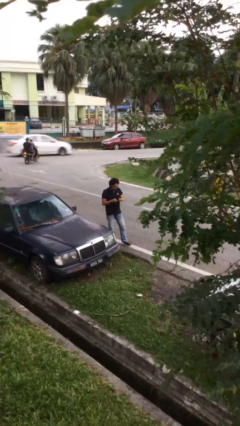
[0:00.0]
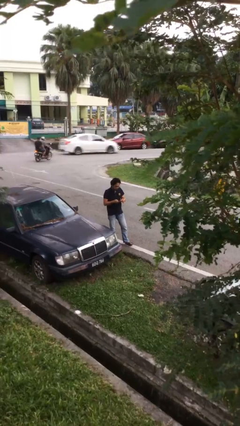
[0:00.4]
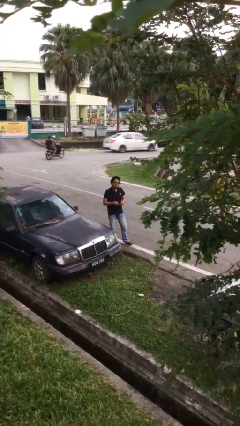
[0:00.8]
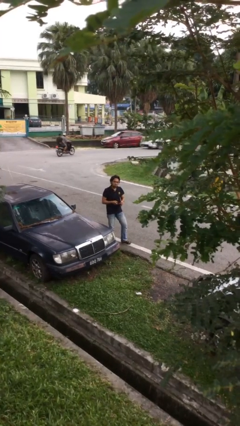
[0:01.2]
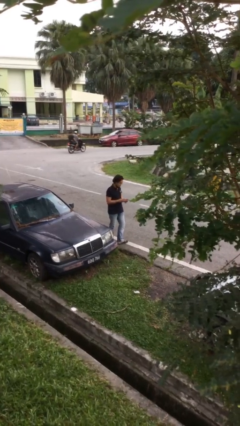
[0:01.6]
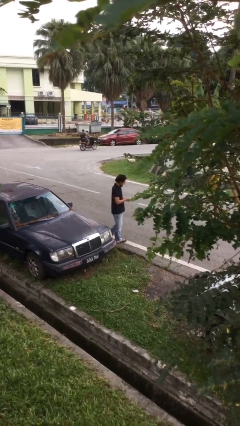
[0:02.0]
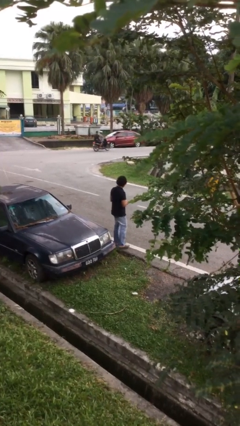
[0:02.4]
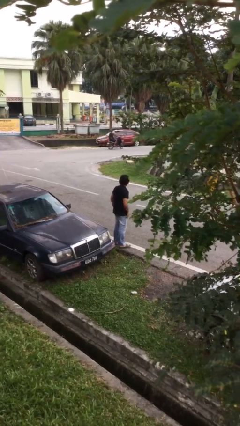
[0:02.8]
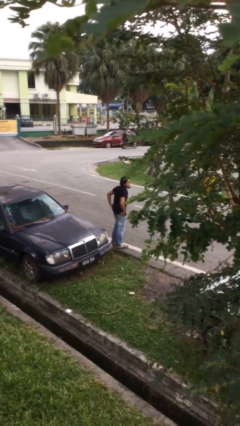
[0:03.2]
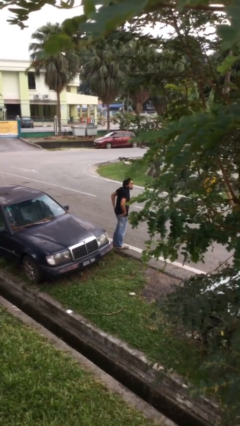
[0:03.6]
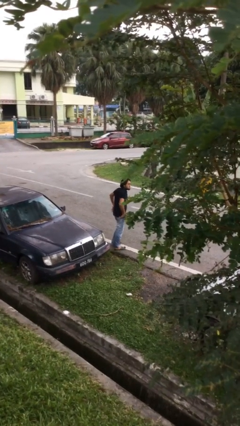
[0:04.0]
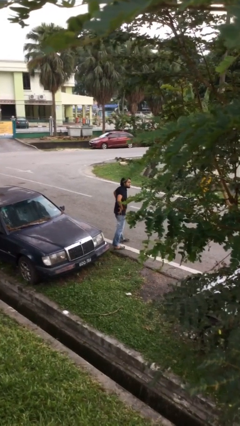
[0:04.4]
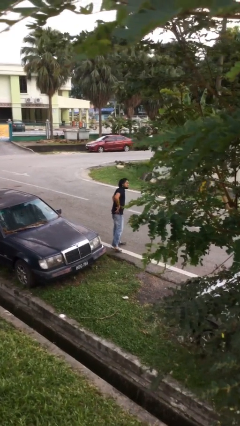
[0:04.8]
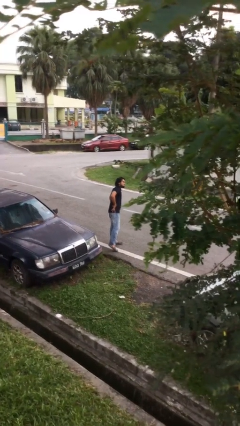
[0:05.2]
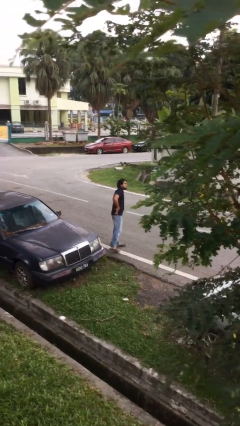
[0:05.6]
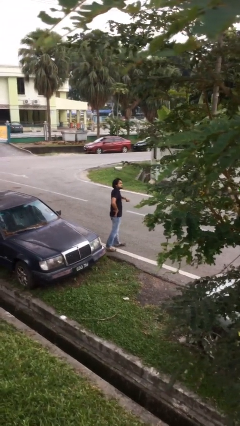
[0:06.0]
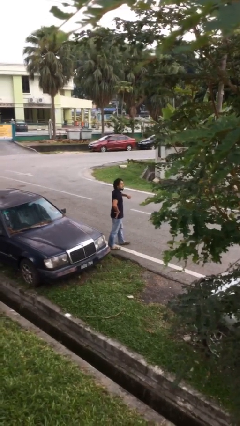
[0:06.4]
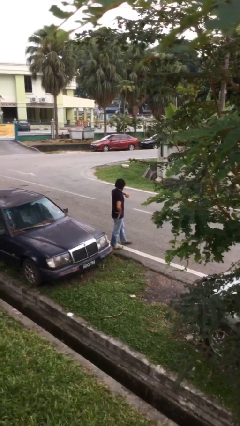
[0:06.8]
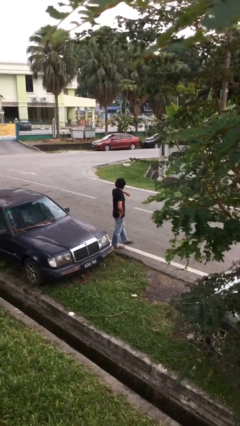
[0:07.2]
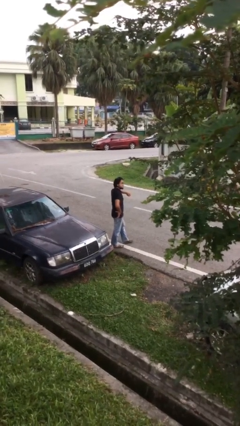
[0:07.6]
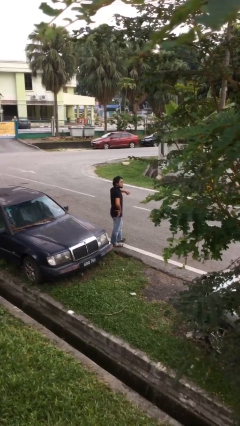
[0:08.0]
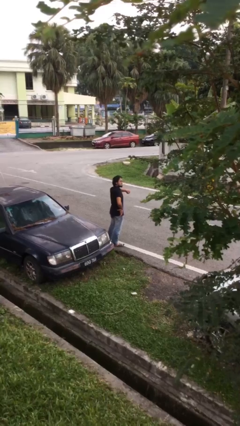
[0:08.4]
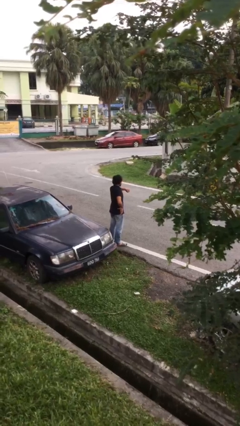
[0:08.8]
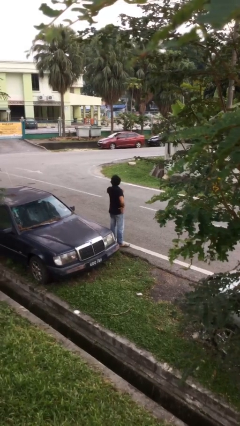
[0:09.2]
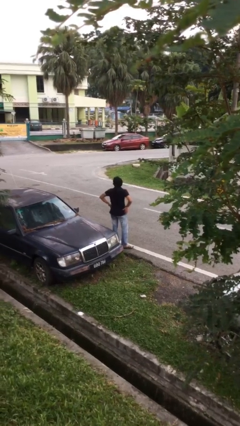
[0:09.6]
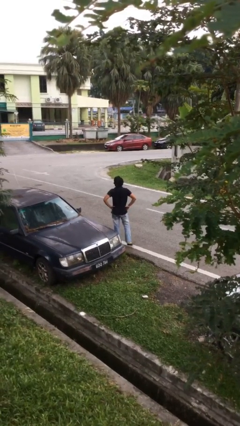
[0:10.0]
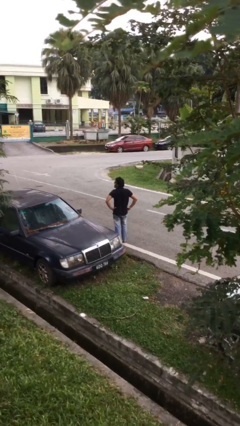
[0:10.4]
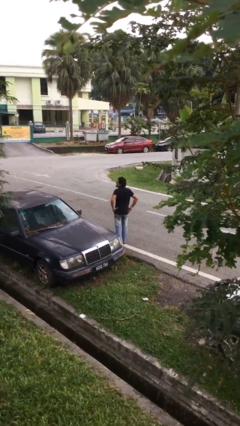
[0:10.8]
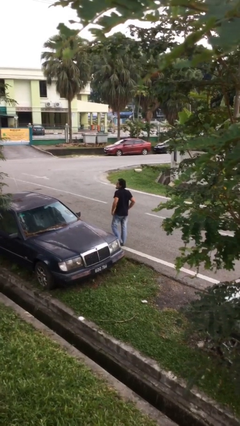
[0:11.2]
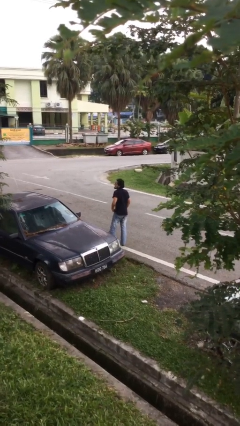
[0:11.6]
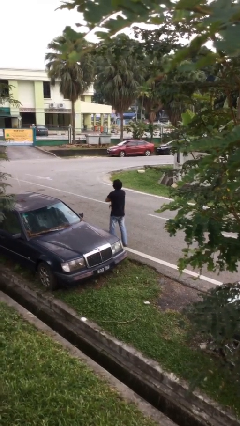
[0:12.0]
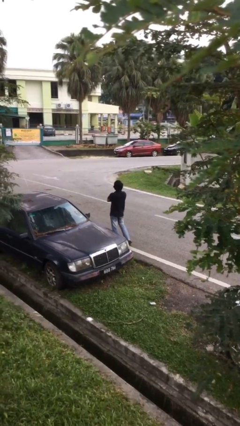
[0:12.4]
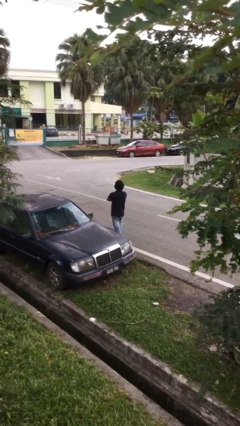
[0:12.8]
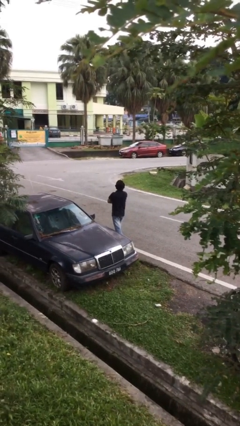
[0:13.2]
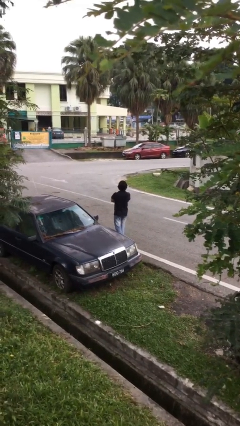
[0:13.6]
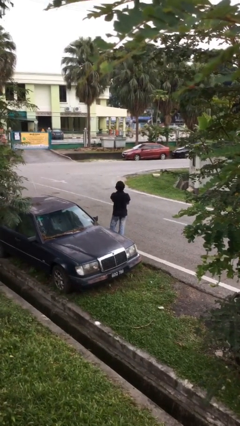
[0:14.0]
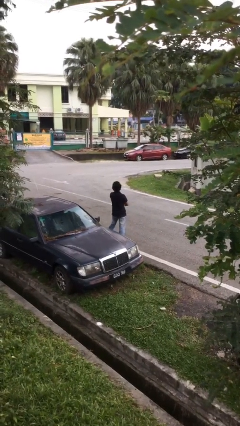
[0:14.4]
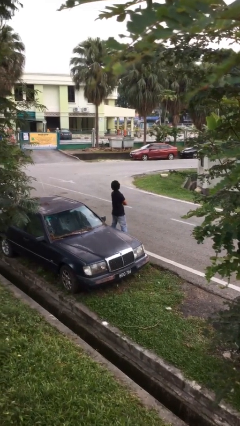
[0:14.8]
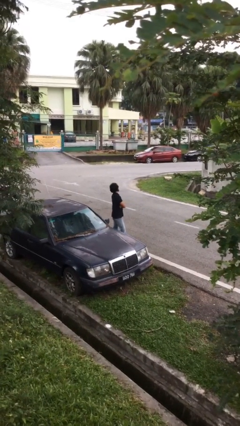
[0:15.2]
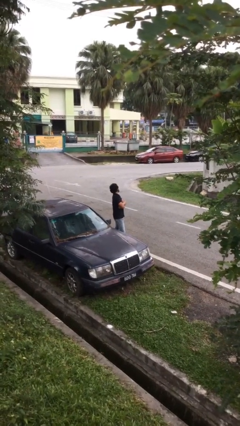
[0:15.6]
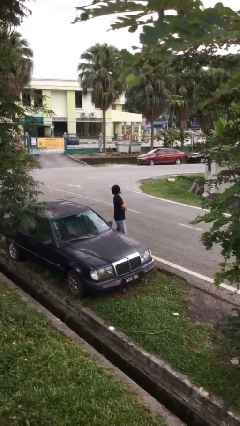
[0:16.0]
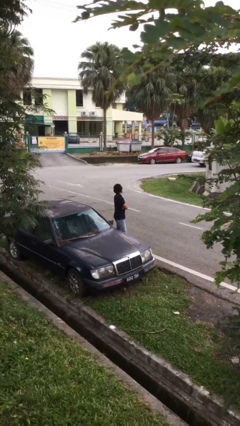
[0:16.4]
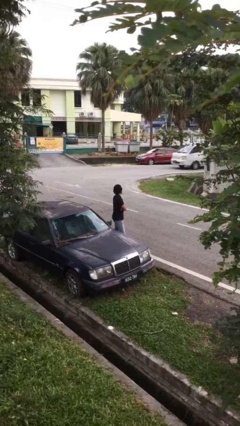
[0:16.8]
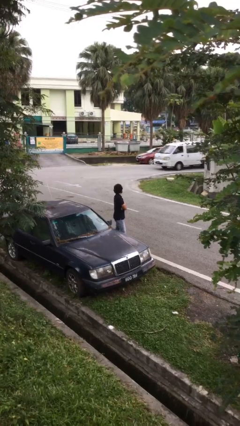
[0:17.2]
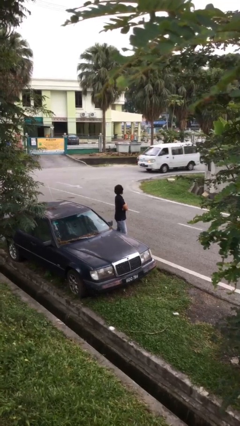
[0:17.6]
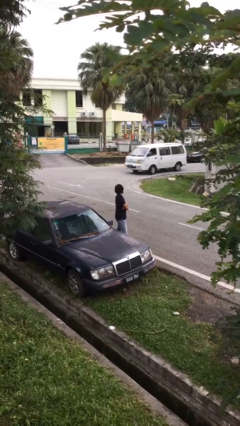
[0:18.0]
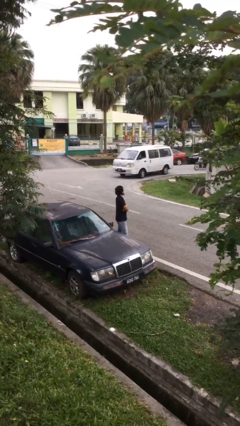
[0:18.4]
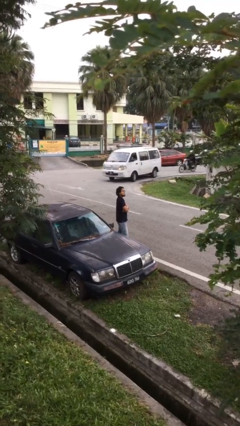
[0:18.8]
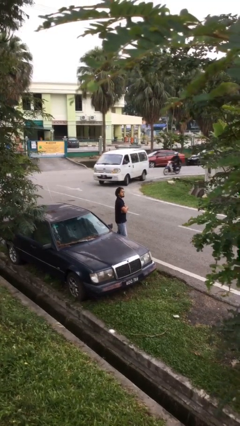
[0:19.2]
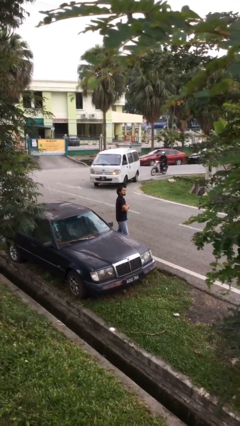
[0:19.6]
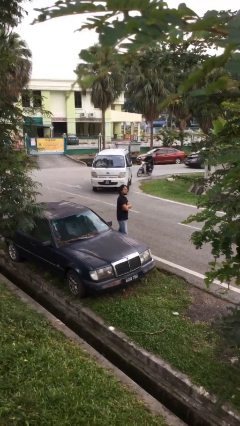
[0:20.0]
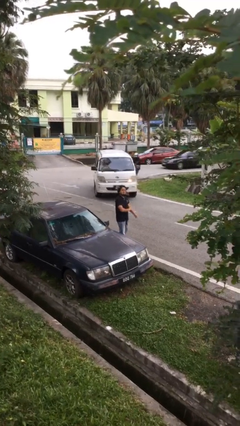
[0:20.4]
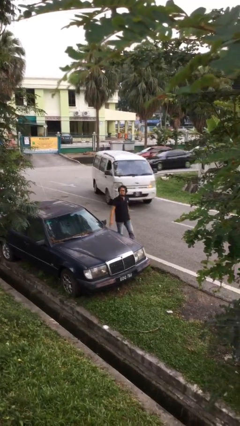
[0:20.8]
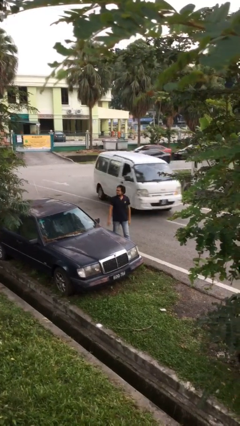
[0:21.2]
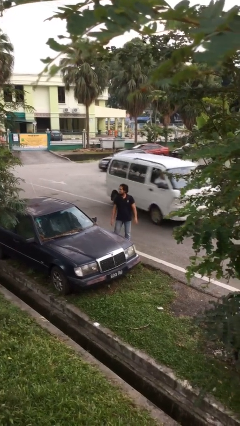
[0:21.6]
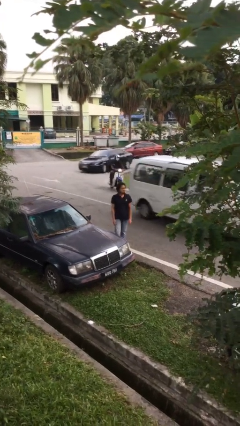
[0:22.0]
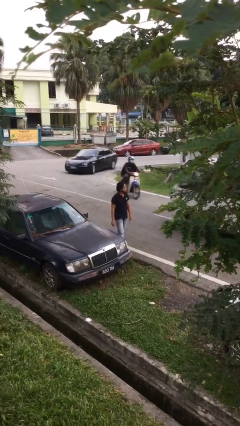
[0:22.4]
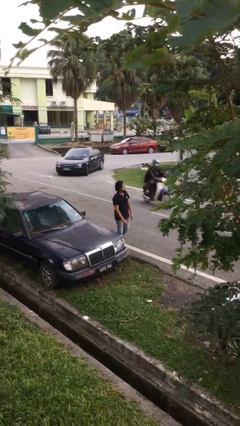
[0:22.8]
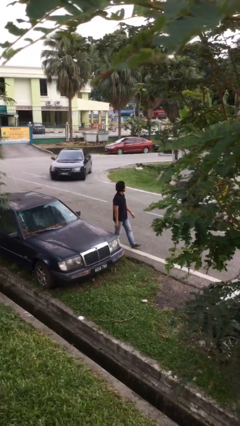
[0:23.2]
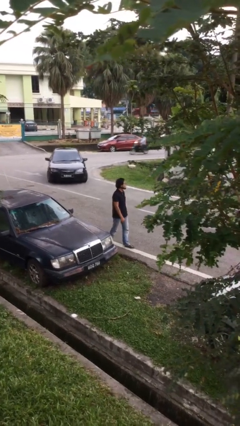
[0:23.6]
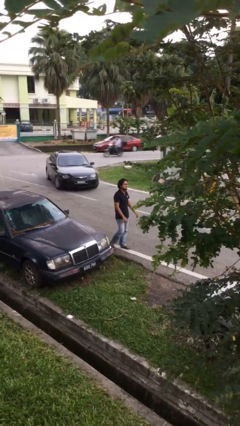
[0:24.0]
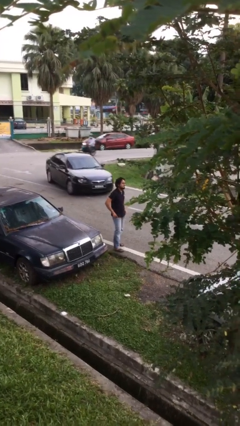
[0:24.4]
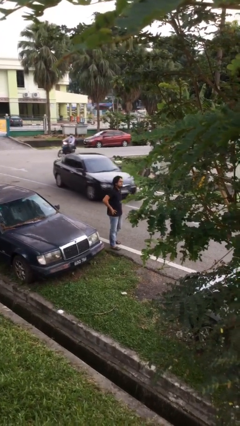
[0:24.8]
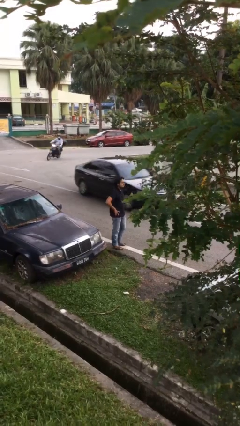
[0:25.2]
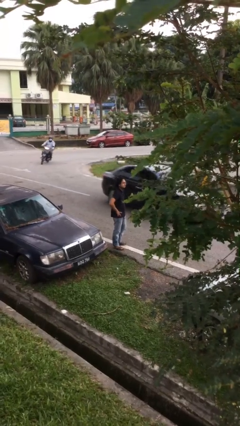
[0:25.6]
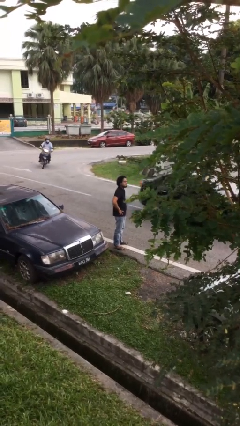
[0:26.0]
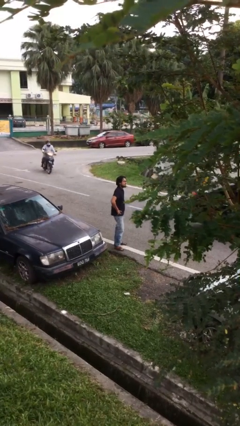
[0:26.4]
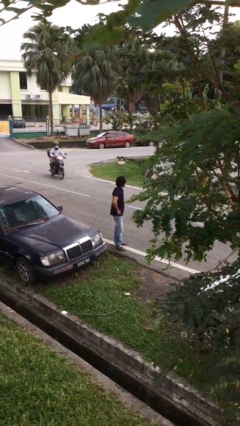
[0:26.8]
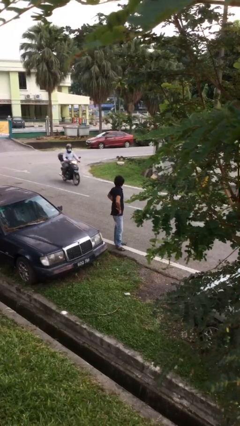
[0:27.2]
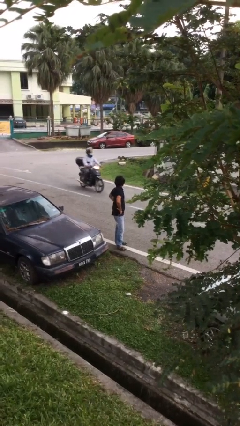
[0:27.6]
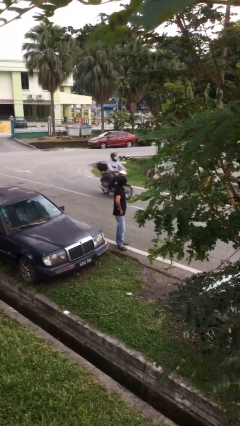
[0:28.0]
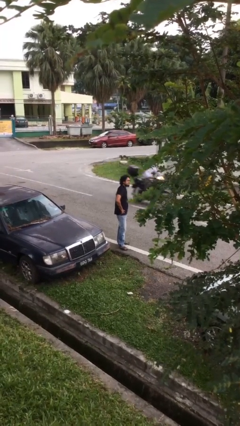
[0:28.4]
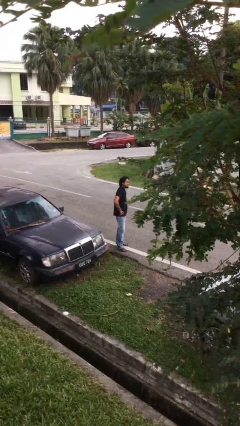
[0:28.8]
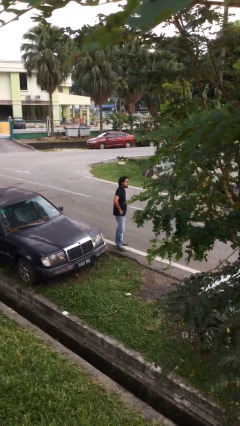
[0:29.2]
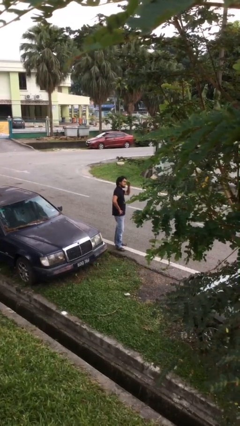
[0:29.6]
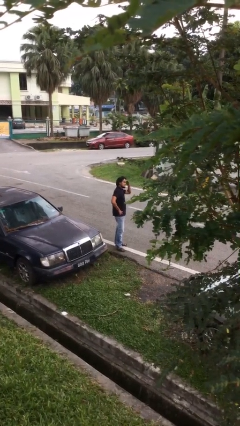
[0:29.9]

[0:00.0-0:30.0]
person walks

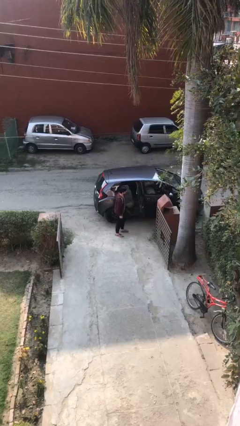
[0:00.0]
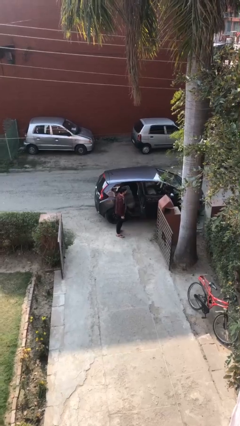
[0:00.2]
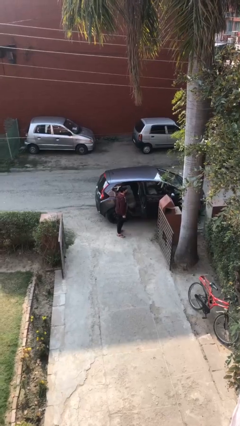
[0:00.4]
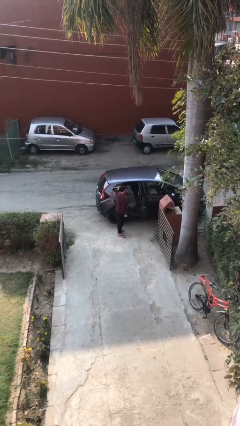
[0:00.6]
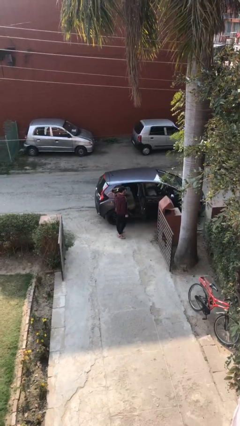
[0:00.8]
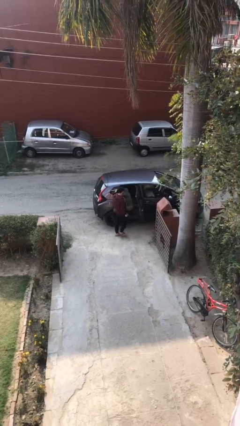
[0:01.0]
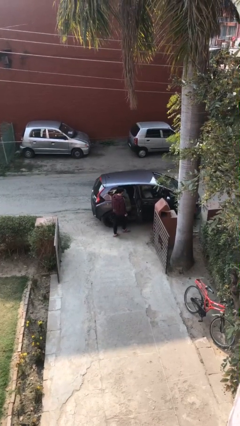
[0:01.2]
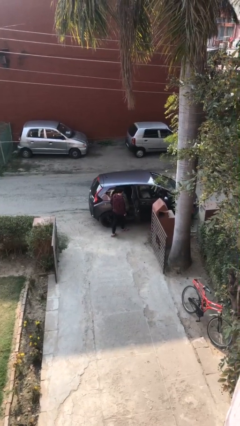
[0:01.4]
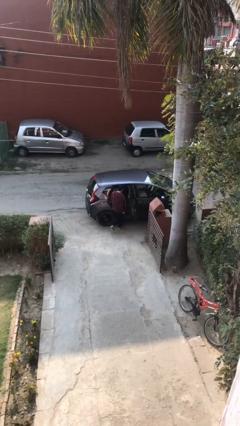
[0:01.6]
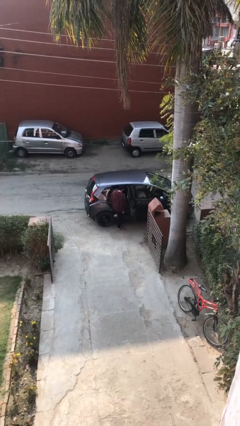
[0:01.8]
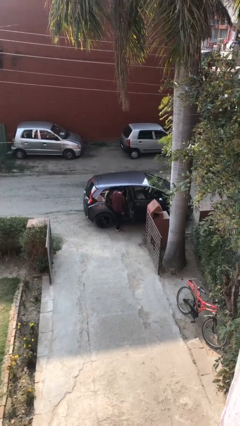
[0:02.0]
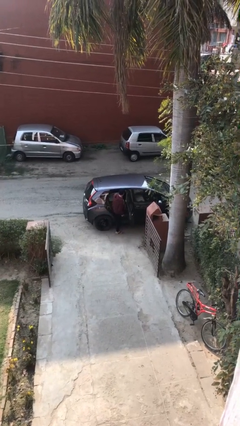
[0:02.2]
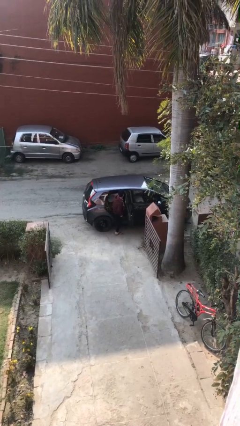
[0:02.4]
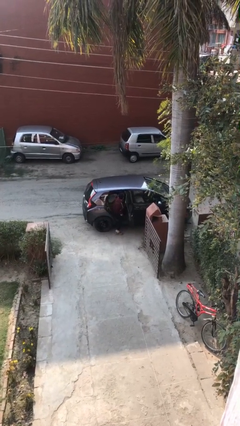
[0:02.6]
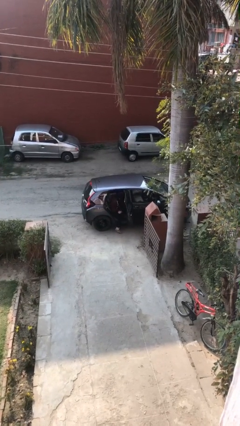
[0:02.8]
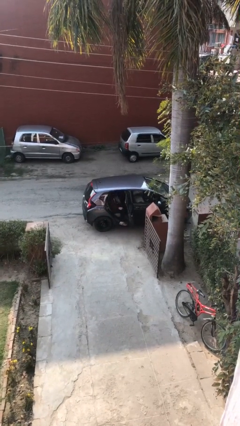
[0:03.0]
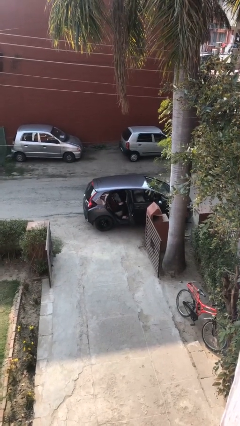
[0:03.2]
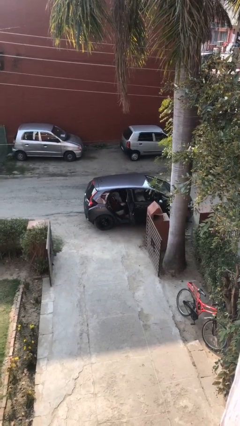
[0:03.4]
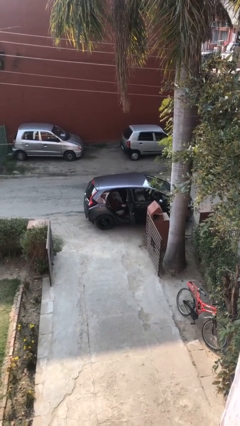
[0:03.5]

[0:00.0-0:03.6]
person enters car
